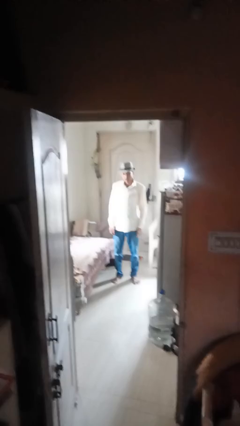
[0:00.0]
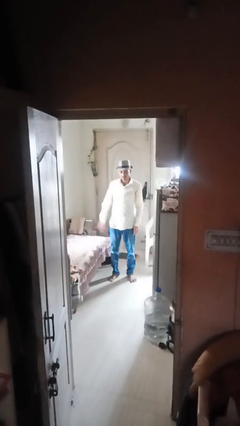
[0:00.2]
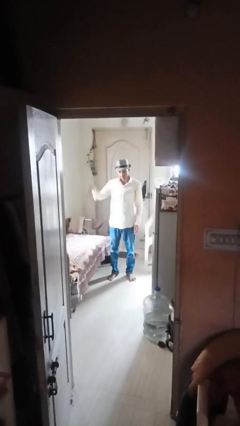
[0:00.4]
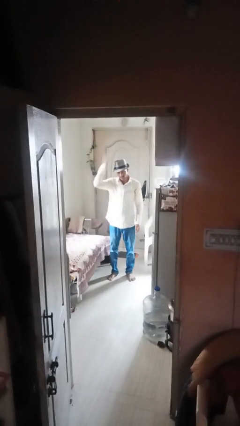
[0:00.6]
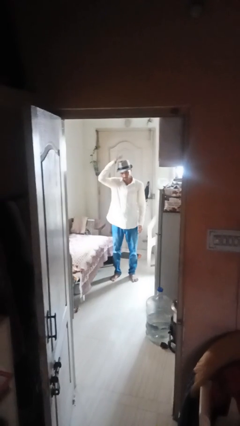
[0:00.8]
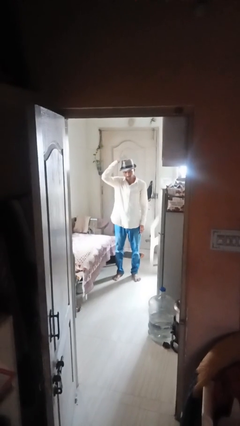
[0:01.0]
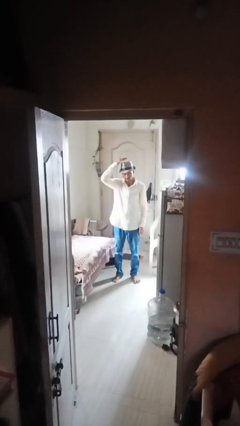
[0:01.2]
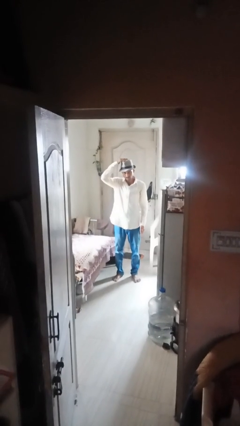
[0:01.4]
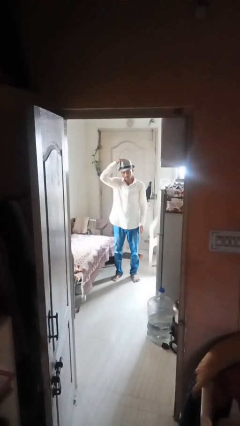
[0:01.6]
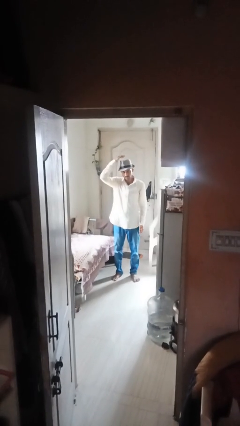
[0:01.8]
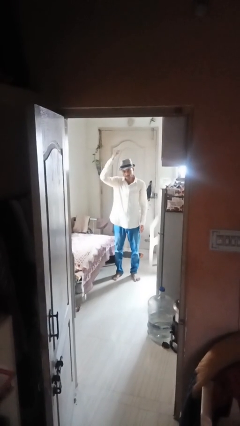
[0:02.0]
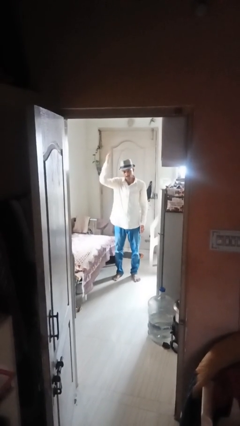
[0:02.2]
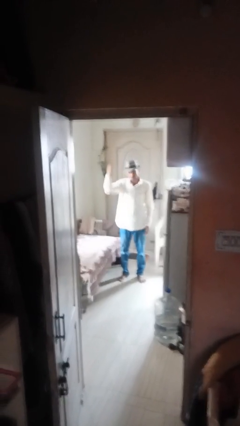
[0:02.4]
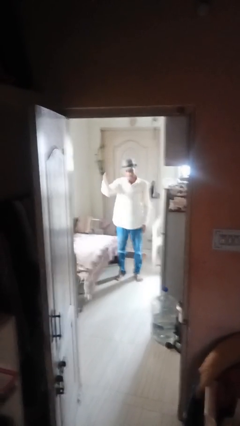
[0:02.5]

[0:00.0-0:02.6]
person pats head

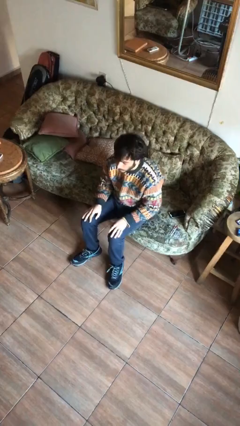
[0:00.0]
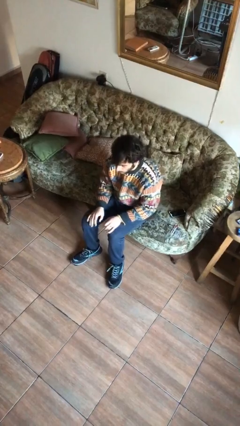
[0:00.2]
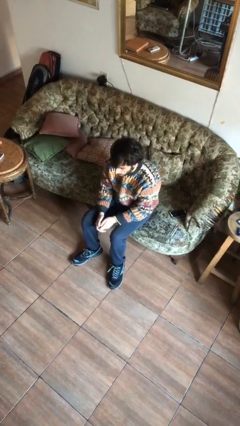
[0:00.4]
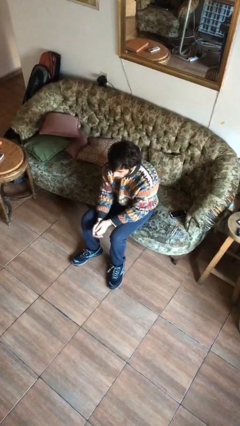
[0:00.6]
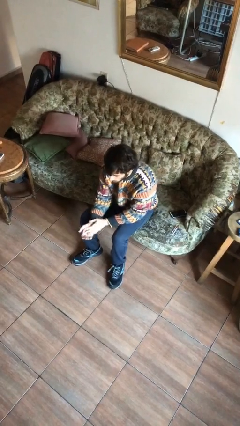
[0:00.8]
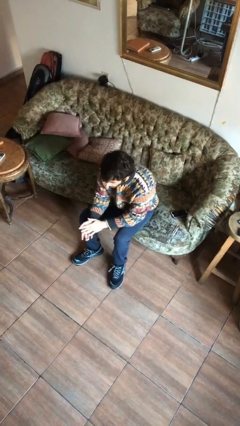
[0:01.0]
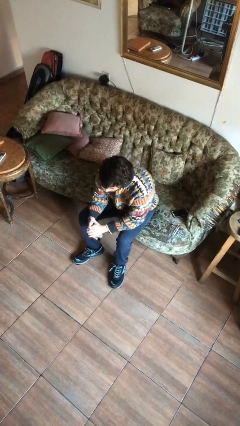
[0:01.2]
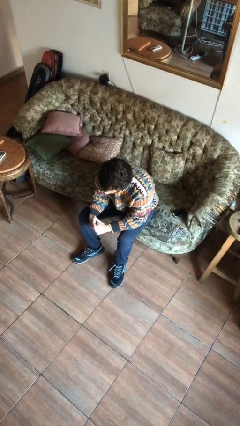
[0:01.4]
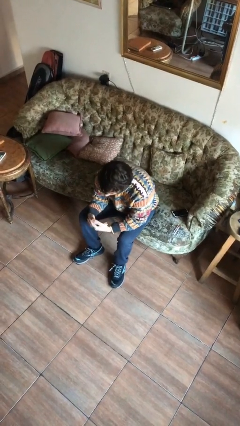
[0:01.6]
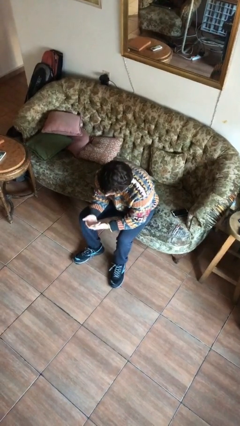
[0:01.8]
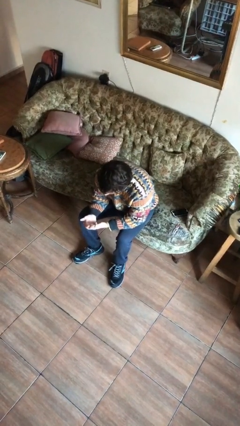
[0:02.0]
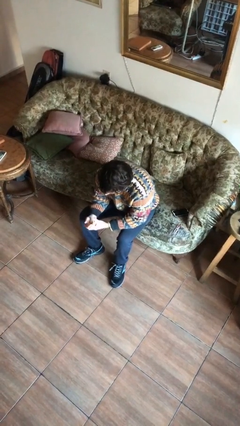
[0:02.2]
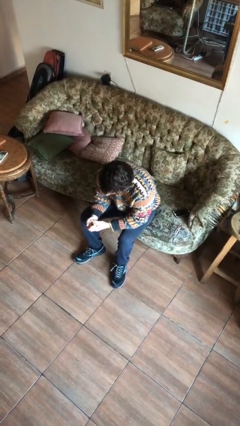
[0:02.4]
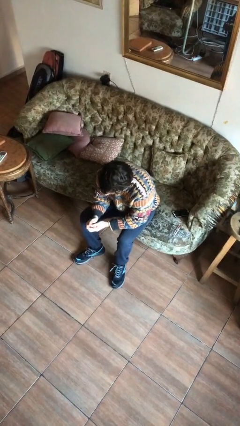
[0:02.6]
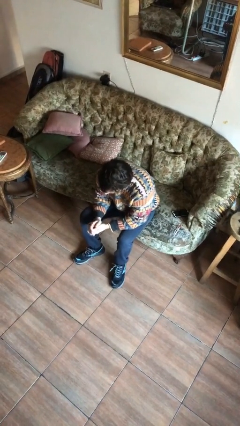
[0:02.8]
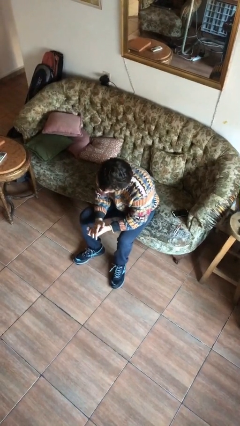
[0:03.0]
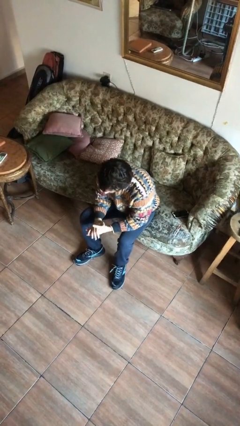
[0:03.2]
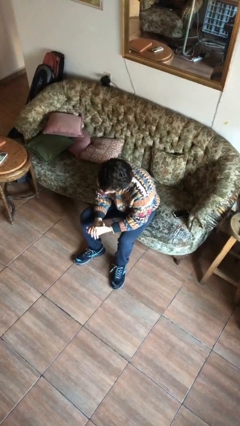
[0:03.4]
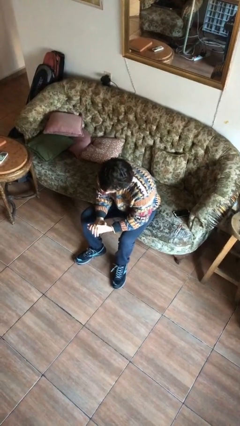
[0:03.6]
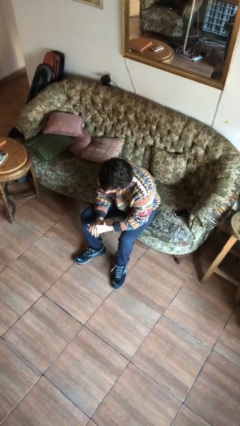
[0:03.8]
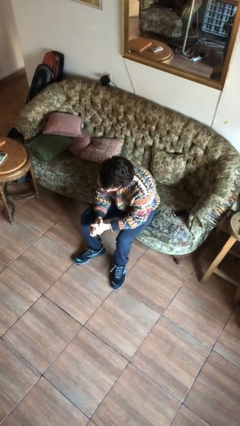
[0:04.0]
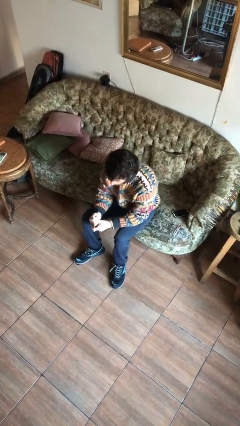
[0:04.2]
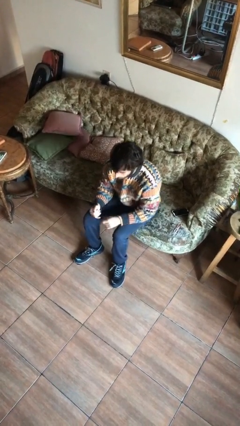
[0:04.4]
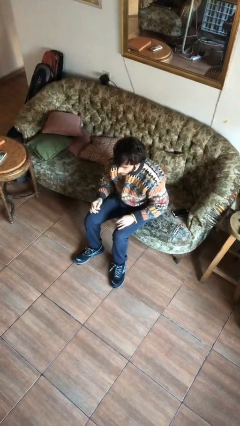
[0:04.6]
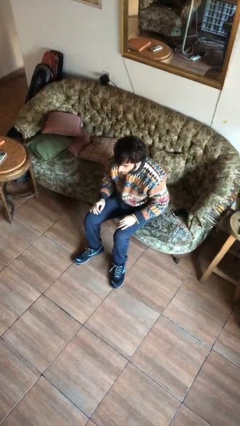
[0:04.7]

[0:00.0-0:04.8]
person looks at hands in lap

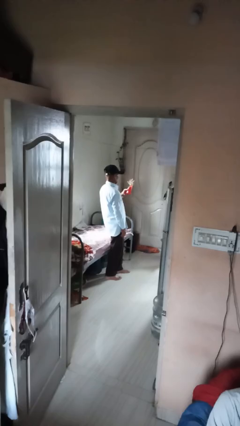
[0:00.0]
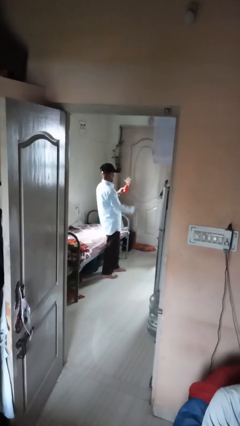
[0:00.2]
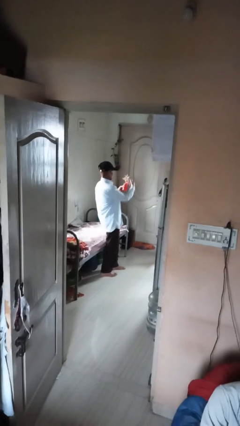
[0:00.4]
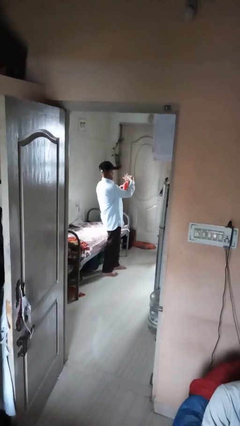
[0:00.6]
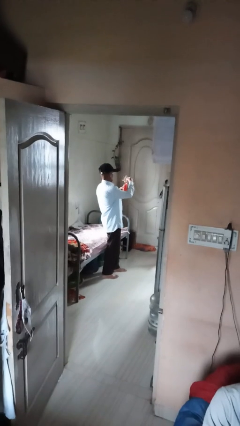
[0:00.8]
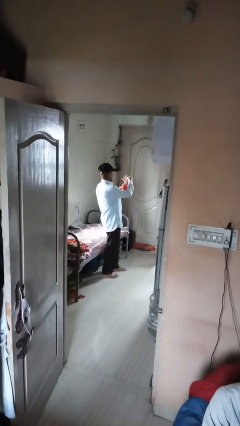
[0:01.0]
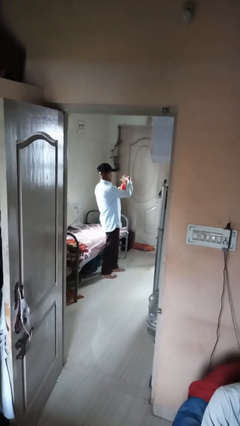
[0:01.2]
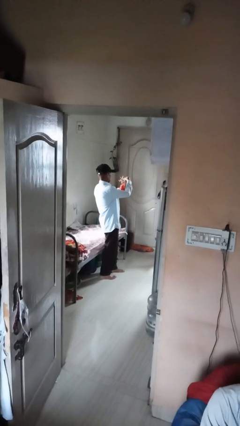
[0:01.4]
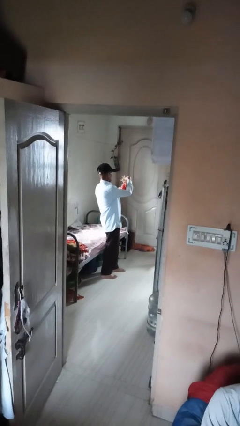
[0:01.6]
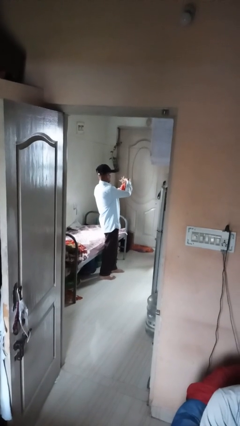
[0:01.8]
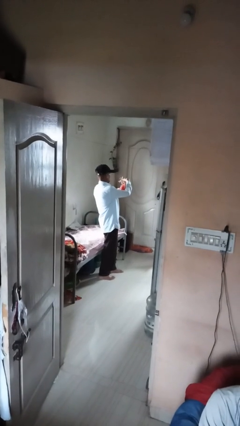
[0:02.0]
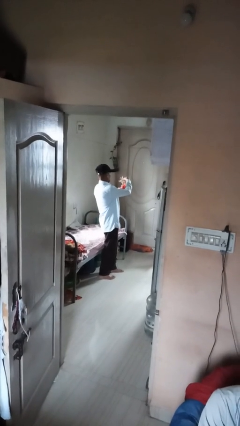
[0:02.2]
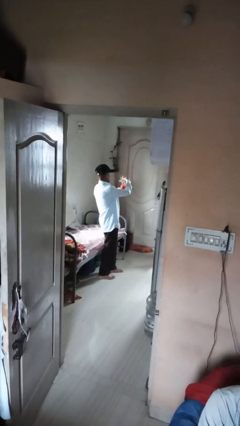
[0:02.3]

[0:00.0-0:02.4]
person arranges flowers in vase

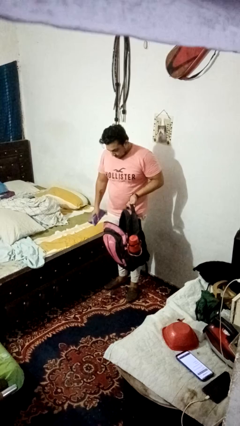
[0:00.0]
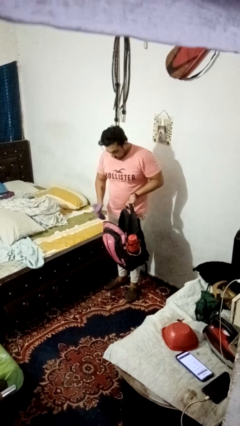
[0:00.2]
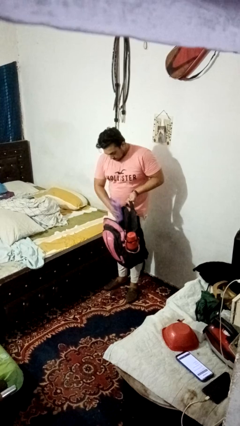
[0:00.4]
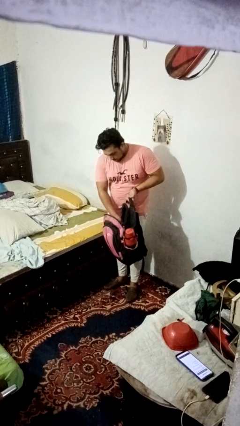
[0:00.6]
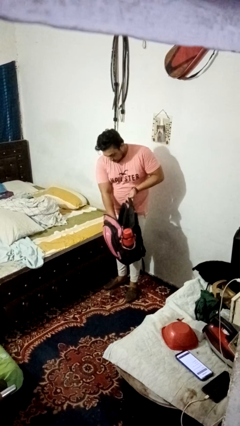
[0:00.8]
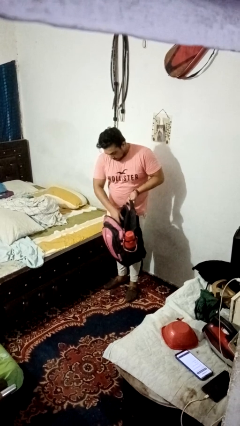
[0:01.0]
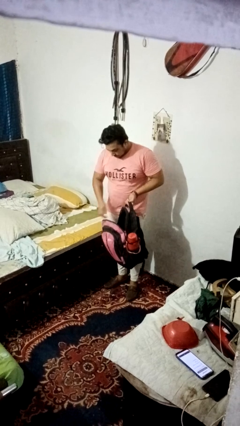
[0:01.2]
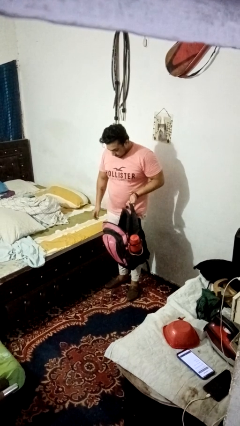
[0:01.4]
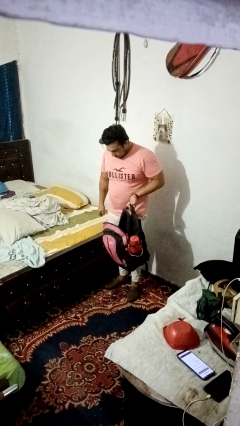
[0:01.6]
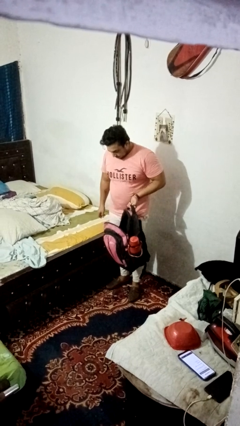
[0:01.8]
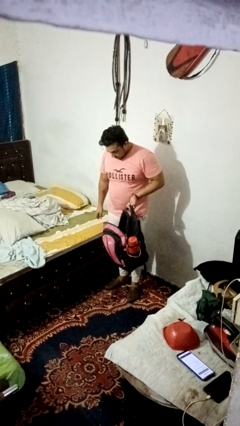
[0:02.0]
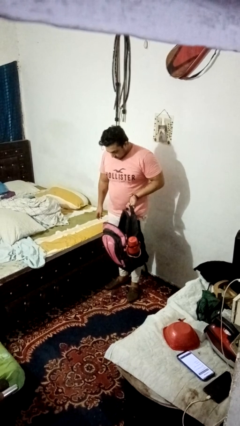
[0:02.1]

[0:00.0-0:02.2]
person puts object into bag

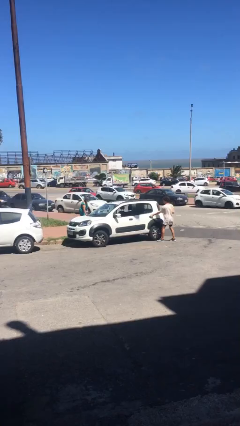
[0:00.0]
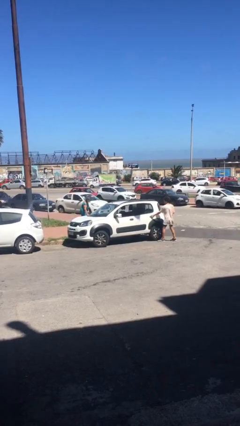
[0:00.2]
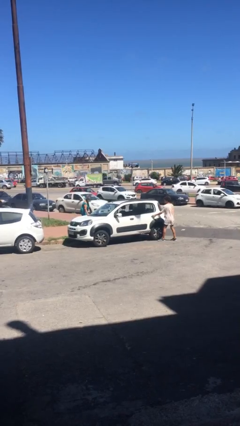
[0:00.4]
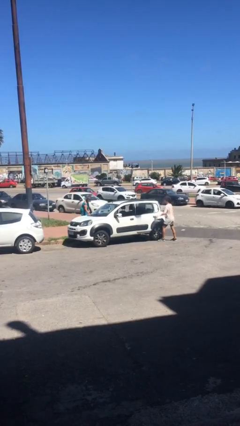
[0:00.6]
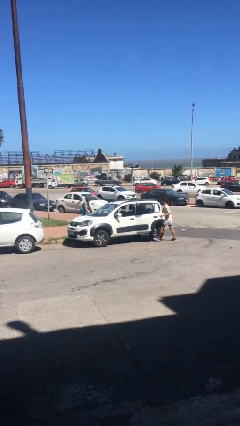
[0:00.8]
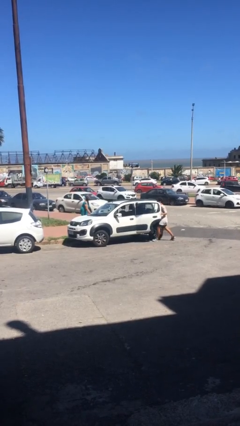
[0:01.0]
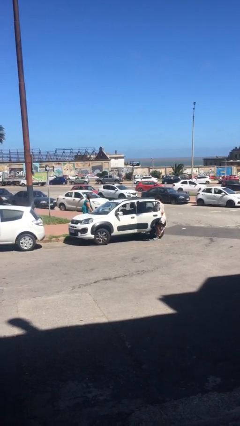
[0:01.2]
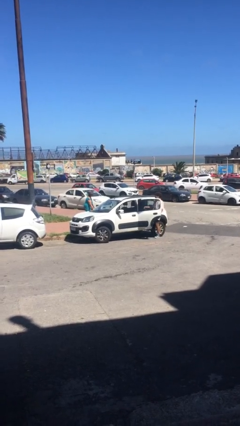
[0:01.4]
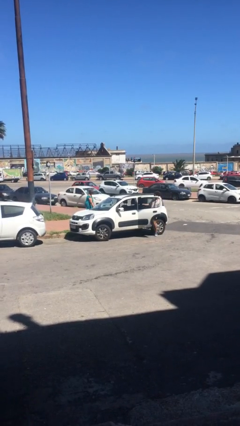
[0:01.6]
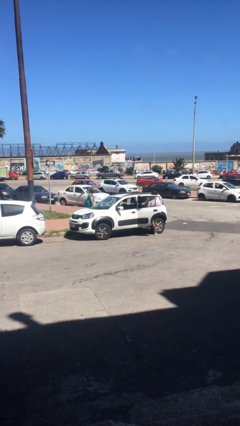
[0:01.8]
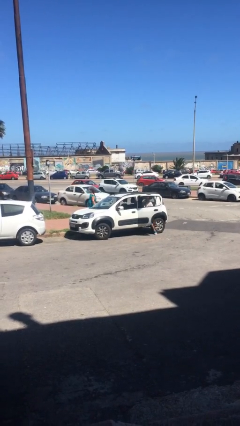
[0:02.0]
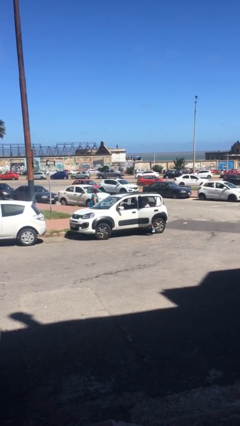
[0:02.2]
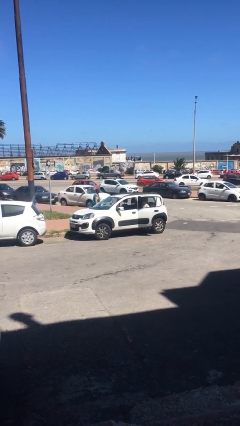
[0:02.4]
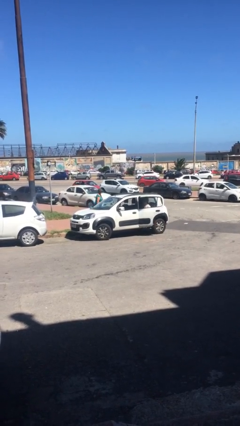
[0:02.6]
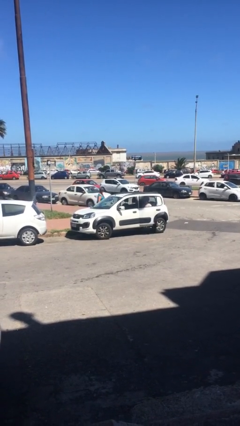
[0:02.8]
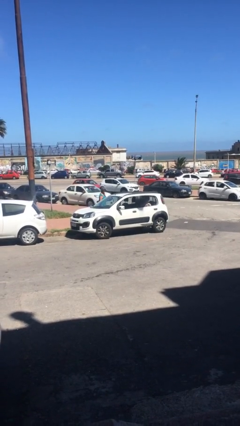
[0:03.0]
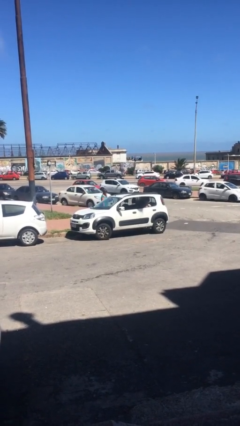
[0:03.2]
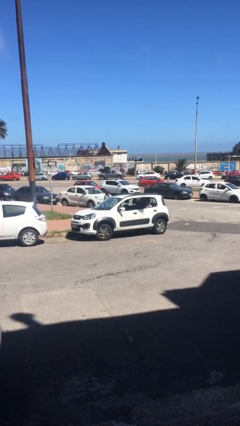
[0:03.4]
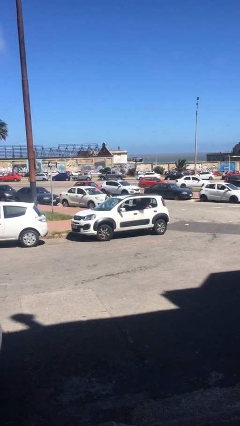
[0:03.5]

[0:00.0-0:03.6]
car picks up person

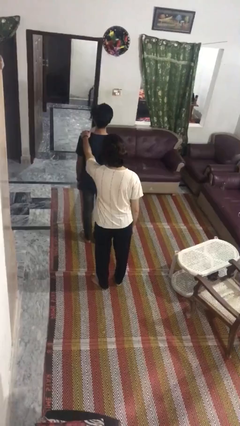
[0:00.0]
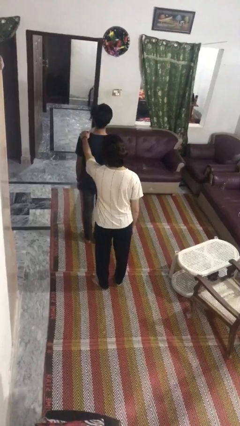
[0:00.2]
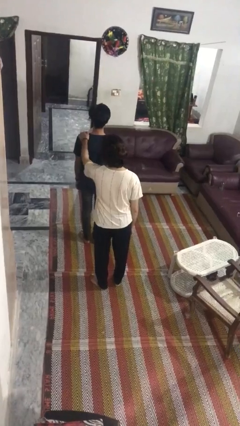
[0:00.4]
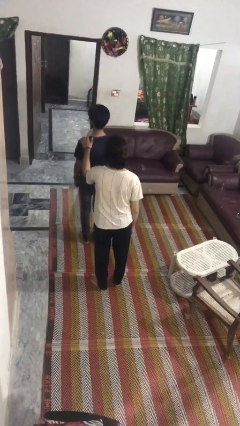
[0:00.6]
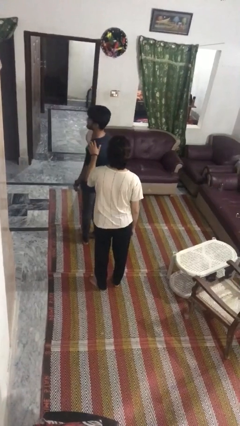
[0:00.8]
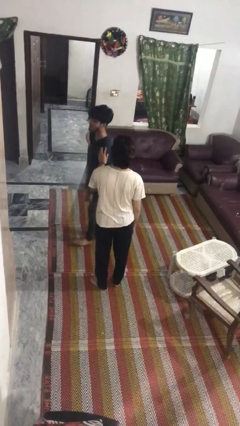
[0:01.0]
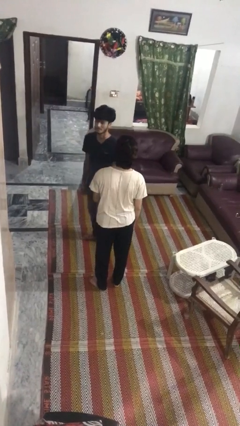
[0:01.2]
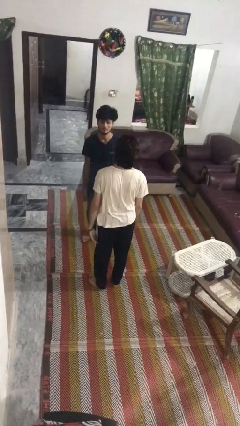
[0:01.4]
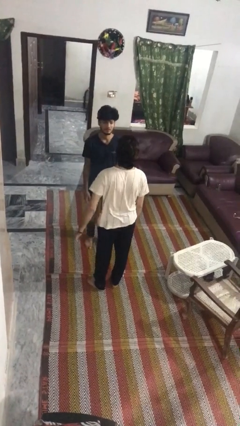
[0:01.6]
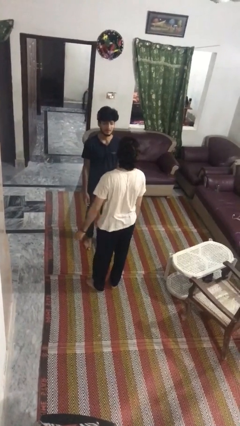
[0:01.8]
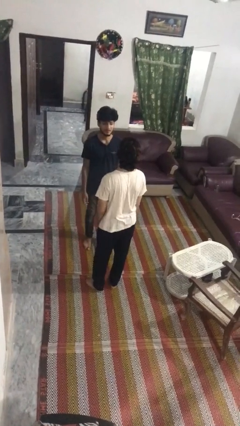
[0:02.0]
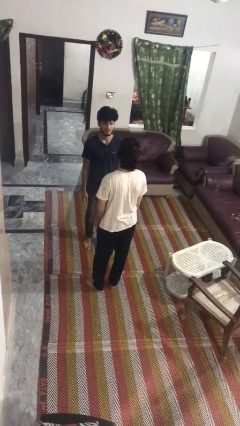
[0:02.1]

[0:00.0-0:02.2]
person spins person around
